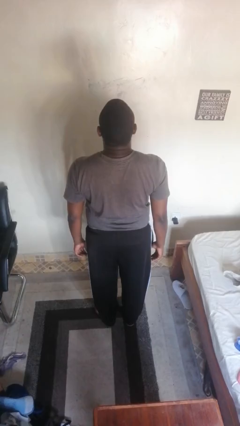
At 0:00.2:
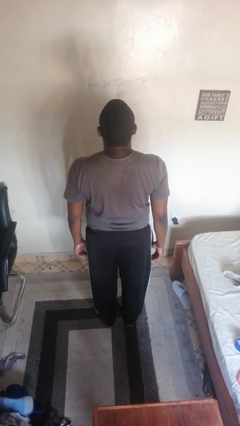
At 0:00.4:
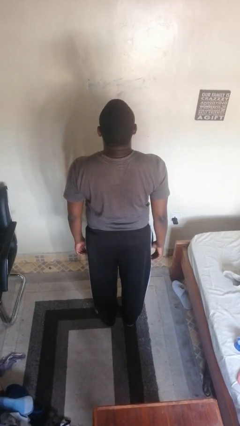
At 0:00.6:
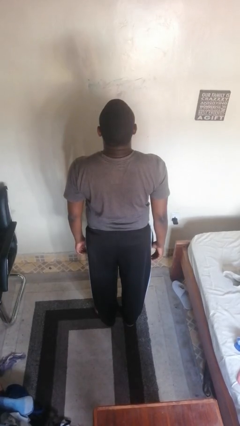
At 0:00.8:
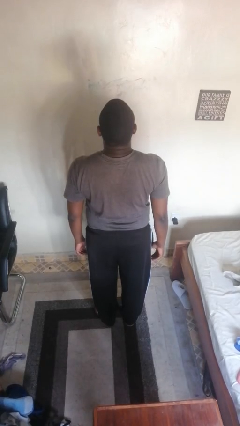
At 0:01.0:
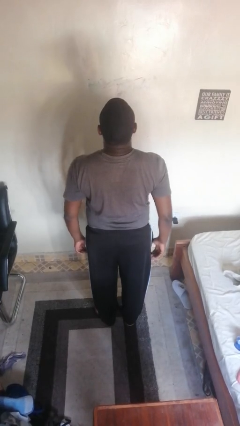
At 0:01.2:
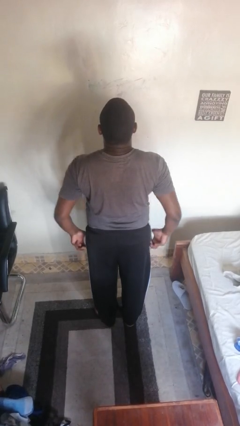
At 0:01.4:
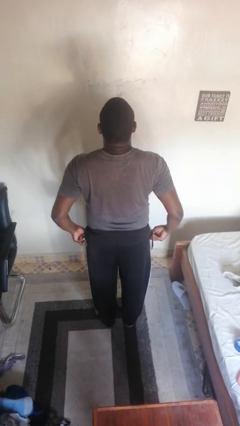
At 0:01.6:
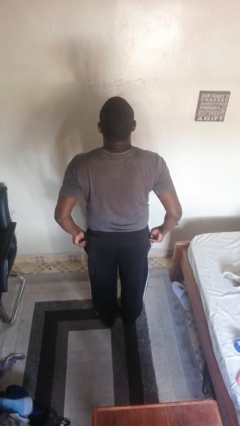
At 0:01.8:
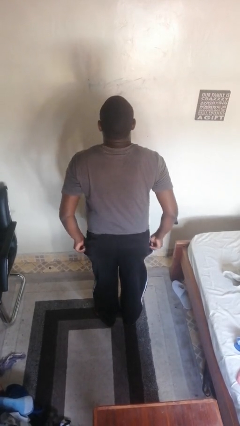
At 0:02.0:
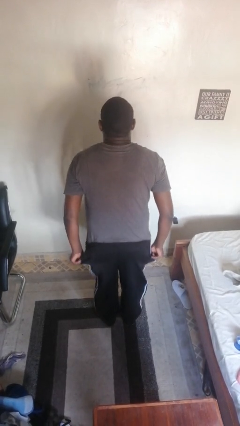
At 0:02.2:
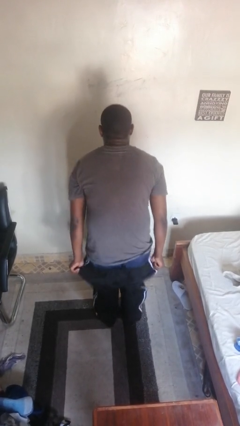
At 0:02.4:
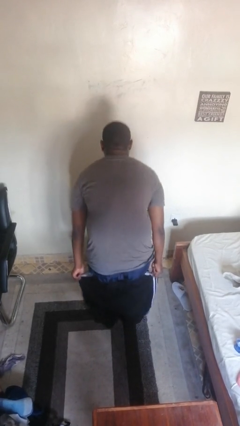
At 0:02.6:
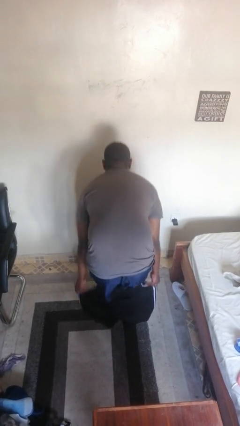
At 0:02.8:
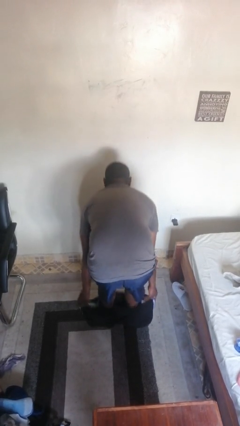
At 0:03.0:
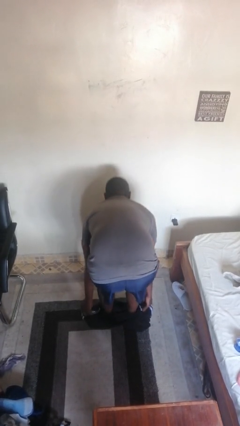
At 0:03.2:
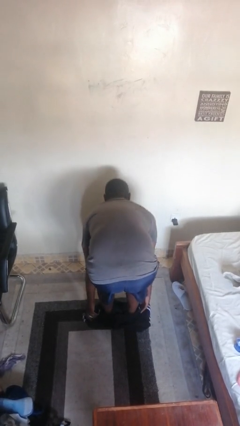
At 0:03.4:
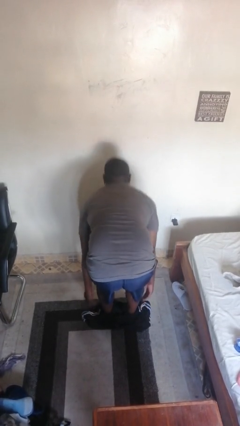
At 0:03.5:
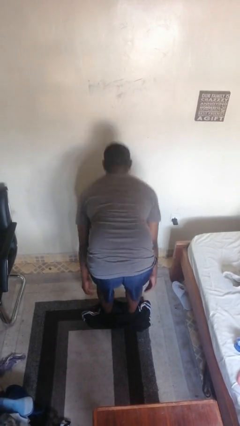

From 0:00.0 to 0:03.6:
person takes off pants

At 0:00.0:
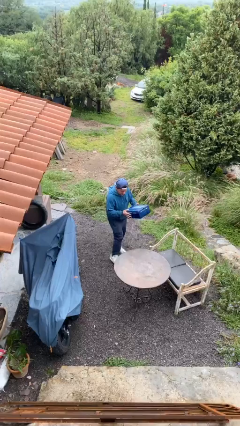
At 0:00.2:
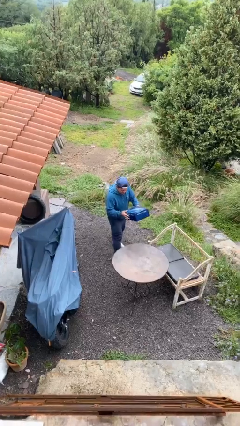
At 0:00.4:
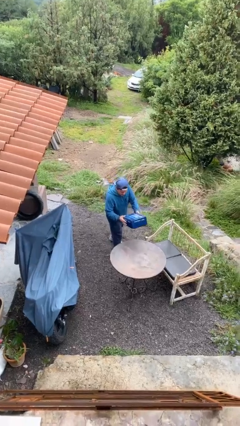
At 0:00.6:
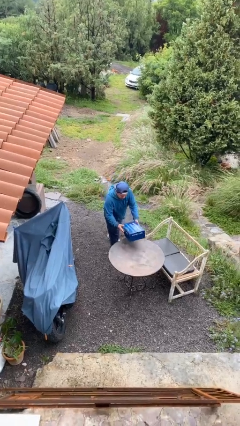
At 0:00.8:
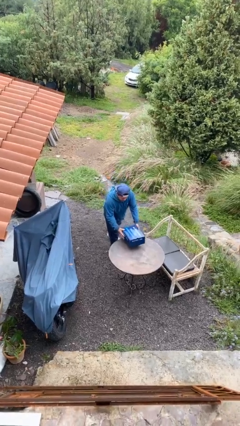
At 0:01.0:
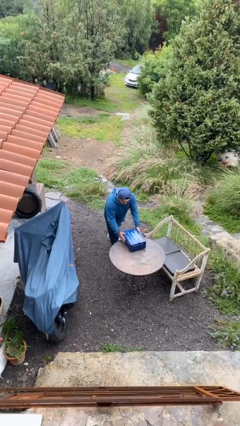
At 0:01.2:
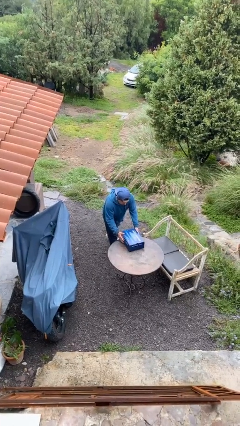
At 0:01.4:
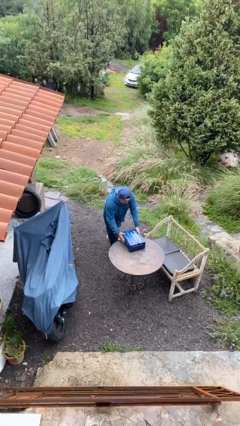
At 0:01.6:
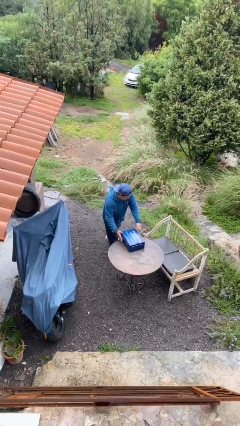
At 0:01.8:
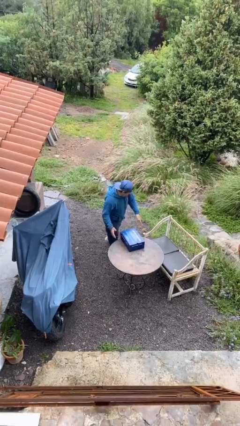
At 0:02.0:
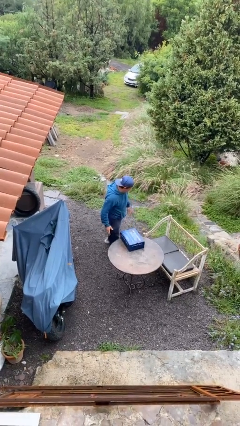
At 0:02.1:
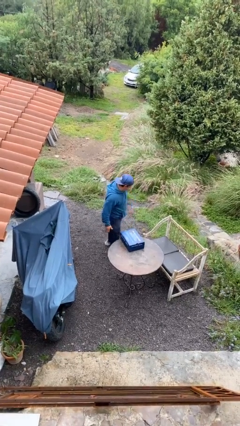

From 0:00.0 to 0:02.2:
person puts down object on table

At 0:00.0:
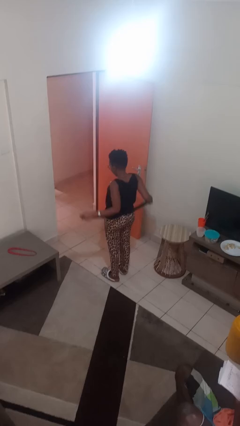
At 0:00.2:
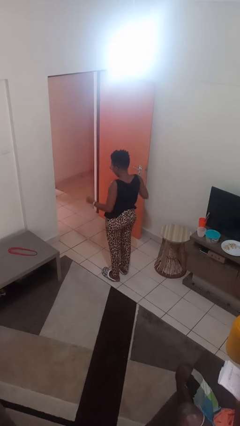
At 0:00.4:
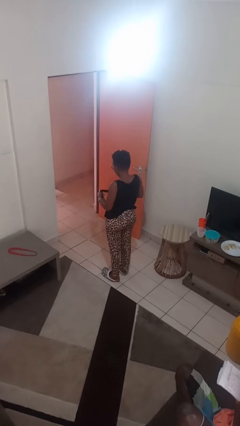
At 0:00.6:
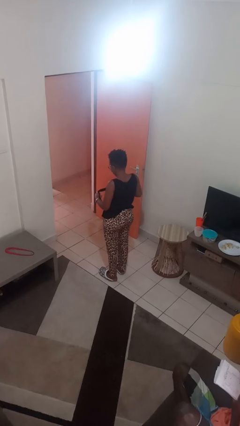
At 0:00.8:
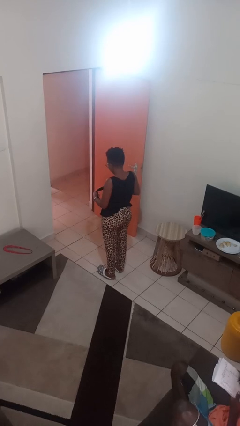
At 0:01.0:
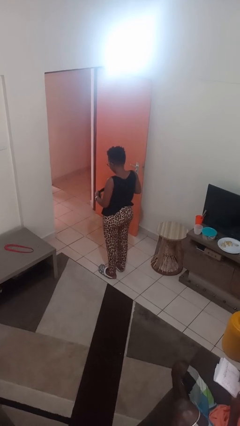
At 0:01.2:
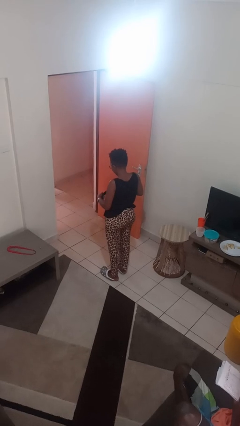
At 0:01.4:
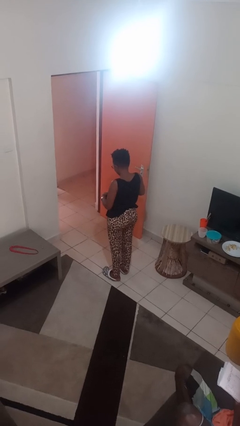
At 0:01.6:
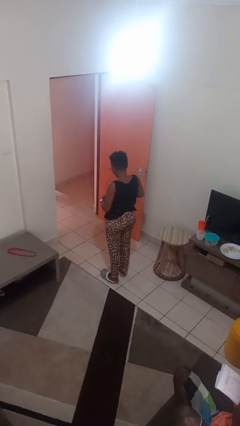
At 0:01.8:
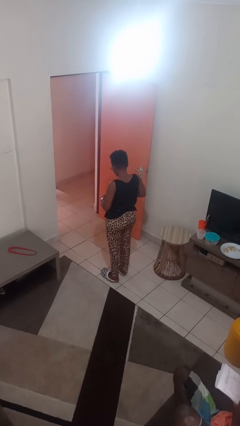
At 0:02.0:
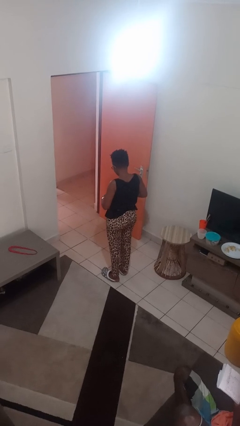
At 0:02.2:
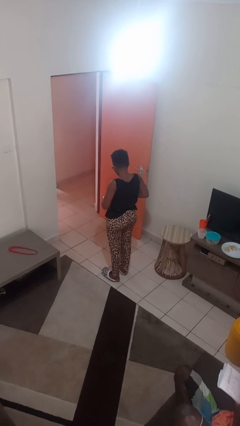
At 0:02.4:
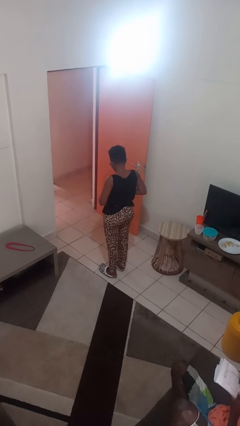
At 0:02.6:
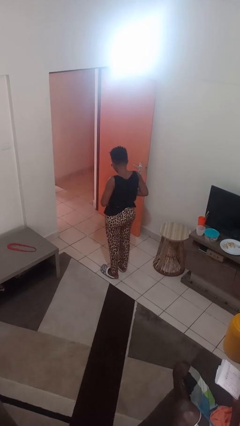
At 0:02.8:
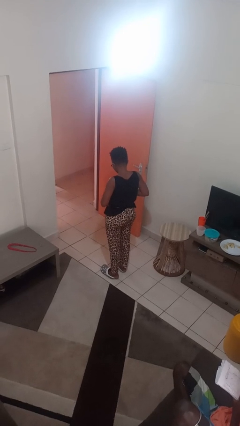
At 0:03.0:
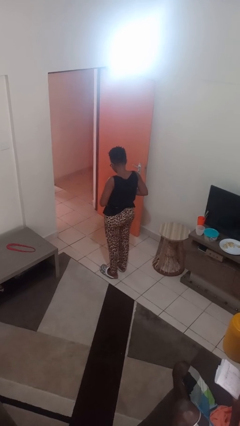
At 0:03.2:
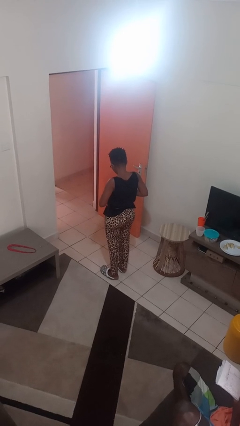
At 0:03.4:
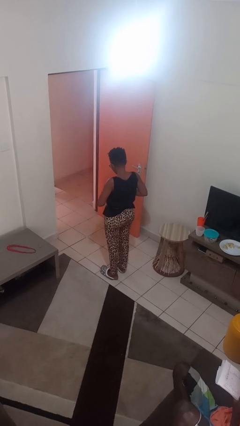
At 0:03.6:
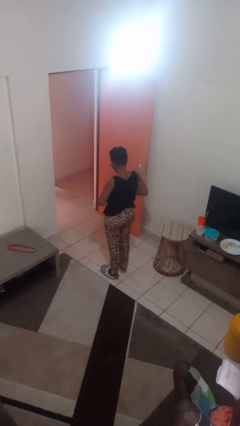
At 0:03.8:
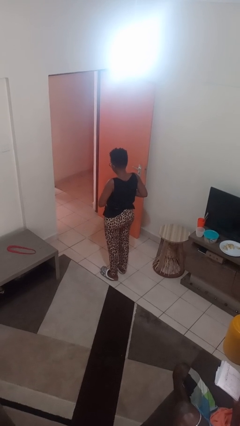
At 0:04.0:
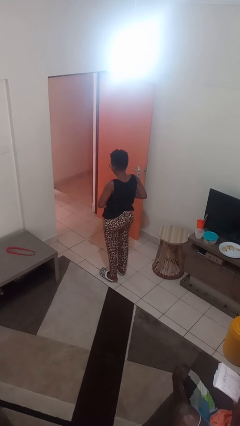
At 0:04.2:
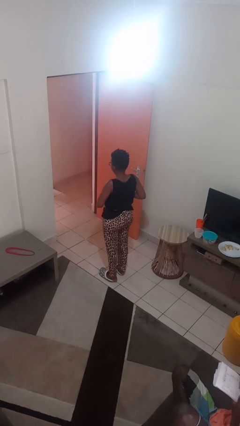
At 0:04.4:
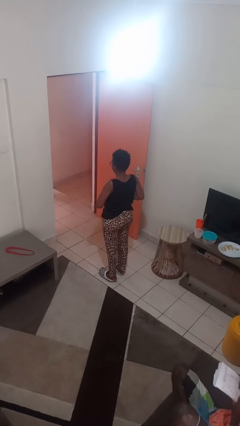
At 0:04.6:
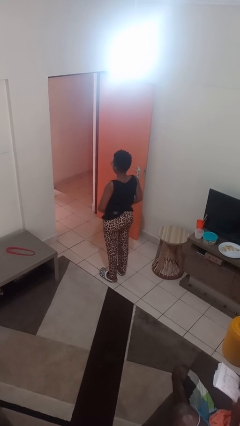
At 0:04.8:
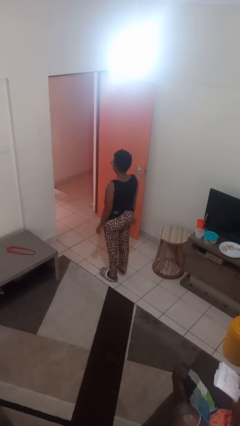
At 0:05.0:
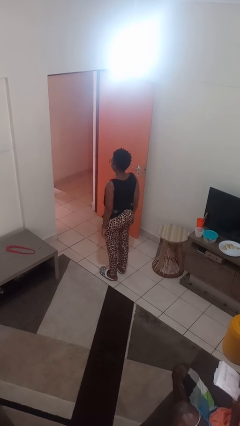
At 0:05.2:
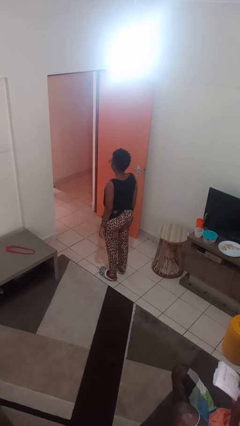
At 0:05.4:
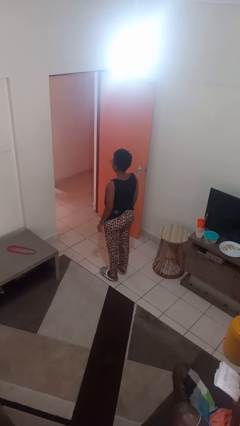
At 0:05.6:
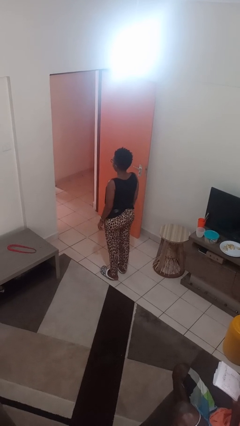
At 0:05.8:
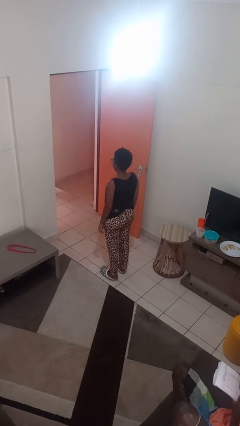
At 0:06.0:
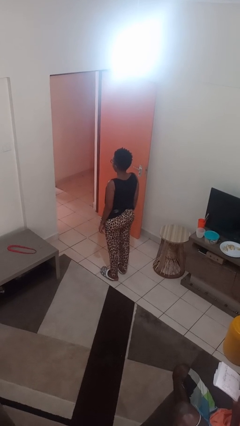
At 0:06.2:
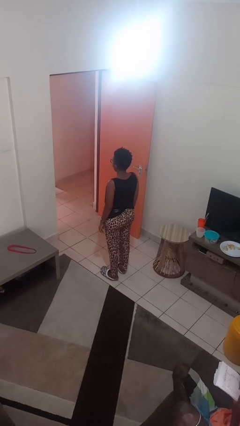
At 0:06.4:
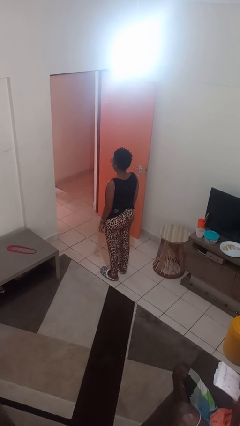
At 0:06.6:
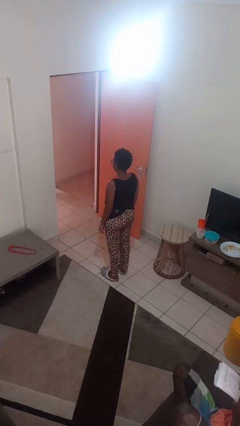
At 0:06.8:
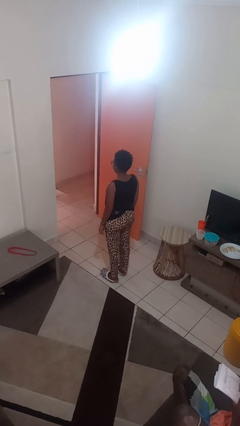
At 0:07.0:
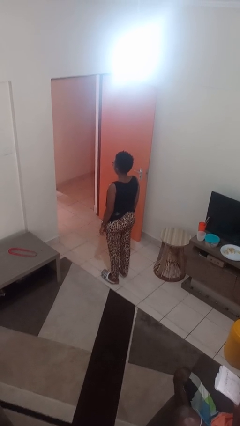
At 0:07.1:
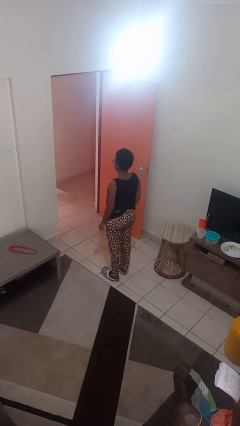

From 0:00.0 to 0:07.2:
person puts on belt

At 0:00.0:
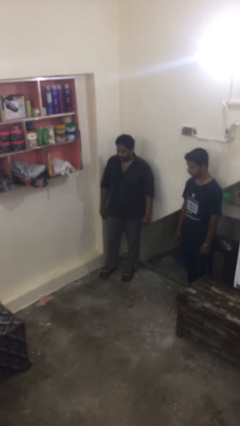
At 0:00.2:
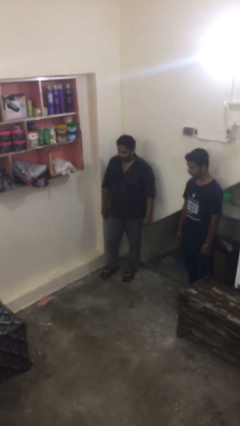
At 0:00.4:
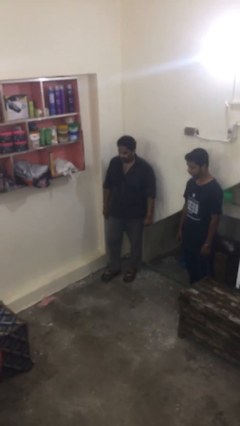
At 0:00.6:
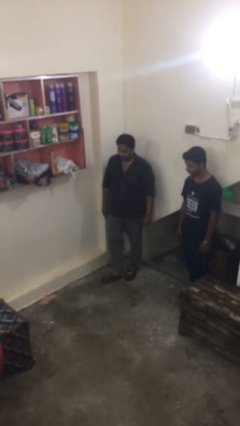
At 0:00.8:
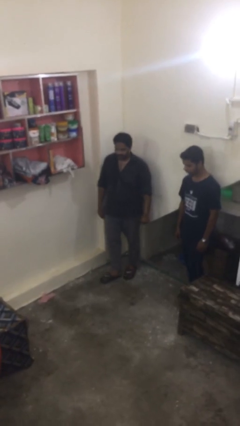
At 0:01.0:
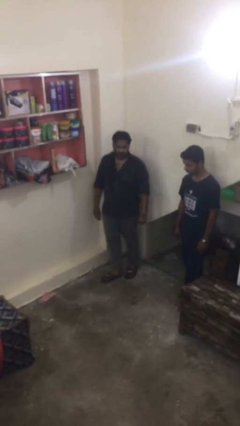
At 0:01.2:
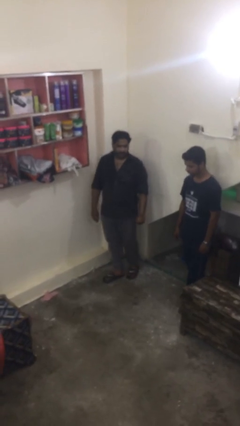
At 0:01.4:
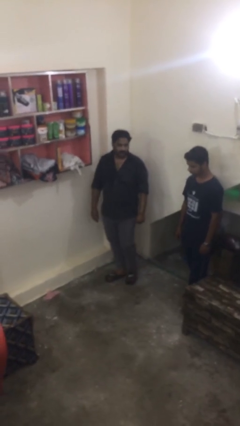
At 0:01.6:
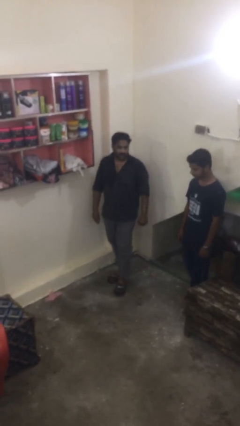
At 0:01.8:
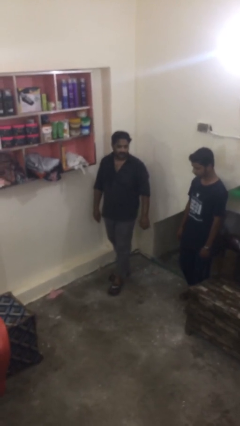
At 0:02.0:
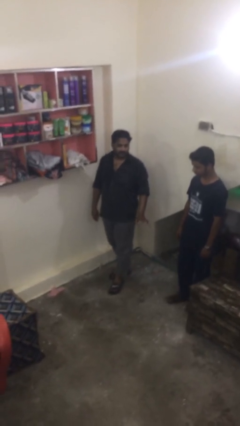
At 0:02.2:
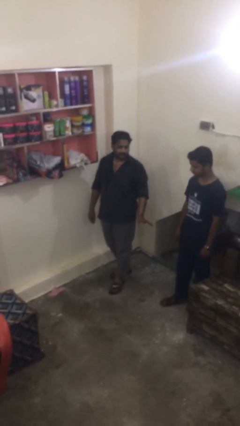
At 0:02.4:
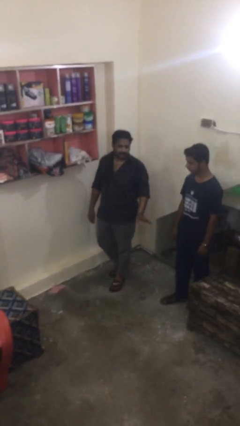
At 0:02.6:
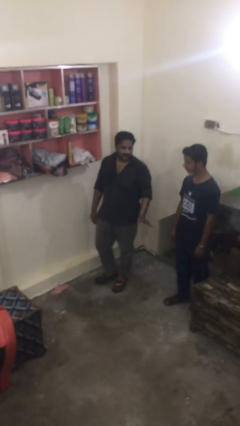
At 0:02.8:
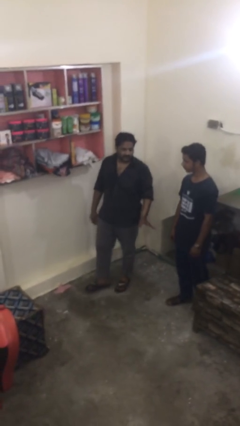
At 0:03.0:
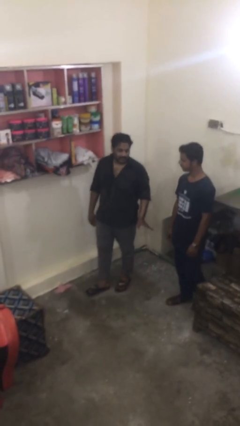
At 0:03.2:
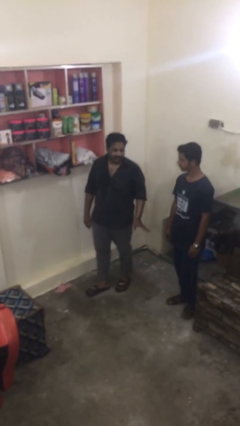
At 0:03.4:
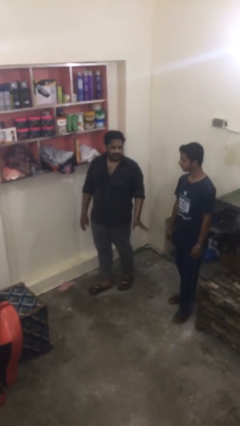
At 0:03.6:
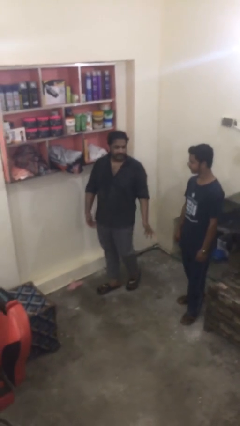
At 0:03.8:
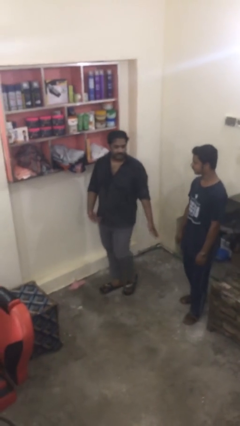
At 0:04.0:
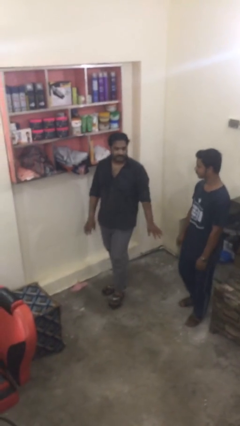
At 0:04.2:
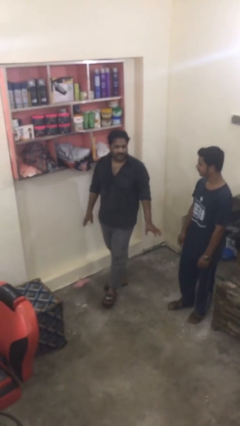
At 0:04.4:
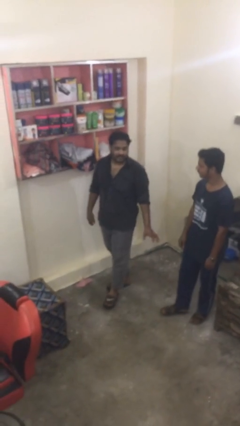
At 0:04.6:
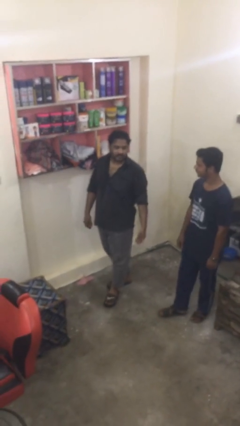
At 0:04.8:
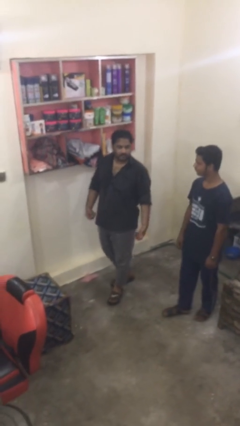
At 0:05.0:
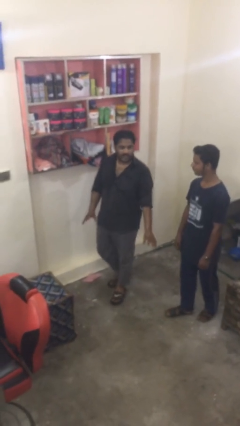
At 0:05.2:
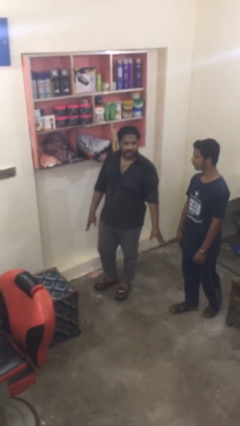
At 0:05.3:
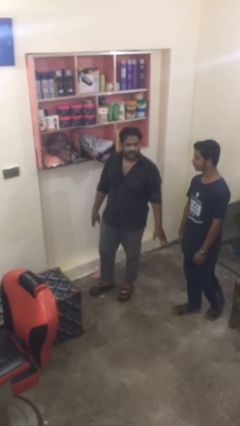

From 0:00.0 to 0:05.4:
person talks to person
